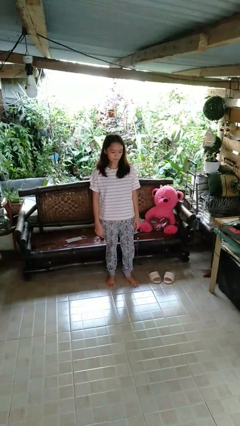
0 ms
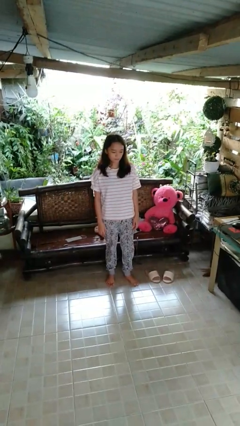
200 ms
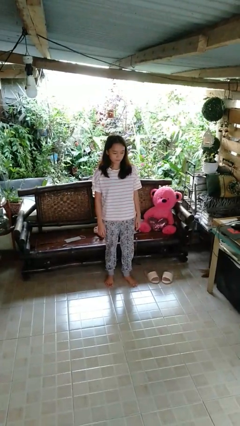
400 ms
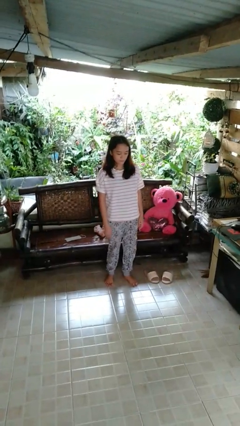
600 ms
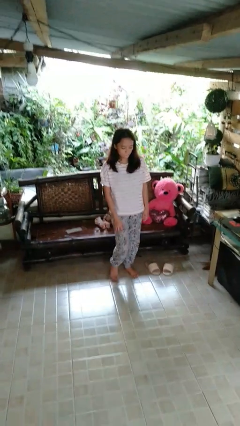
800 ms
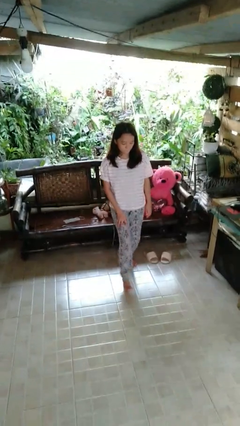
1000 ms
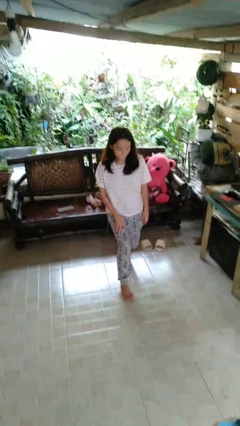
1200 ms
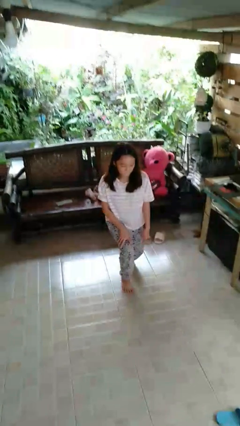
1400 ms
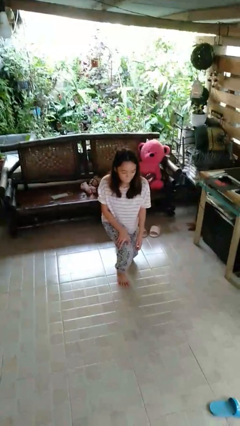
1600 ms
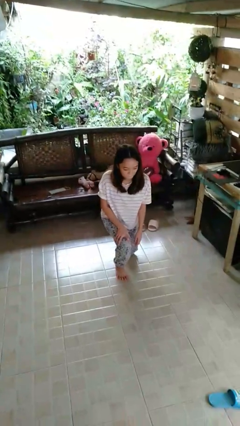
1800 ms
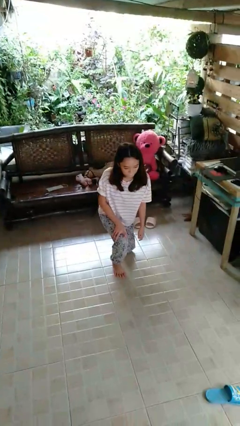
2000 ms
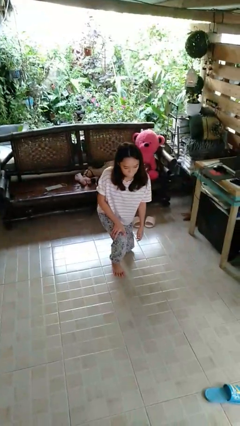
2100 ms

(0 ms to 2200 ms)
person kneels

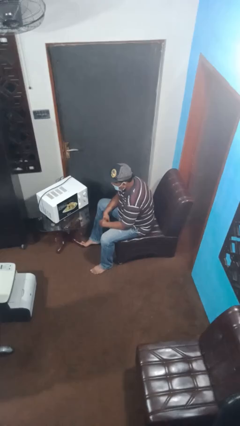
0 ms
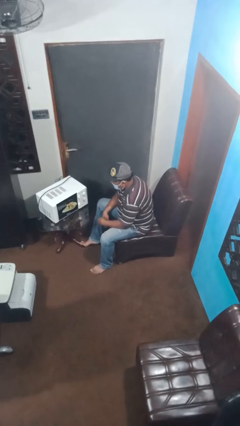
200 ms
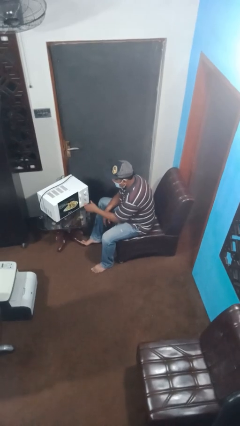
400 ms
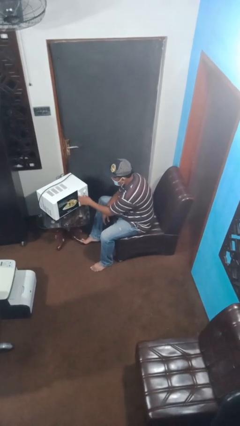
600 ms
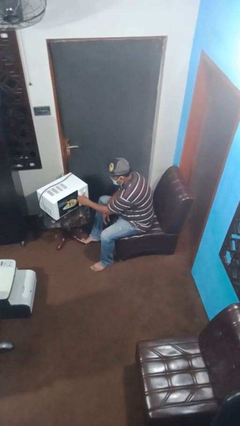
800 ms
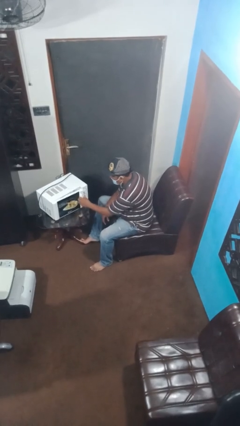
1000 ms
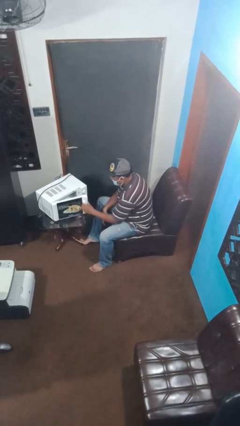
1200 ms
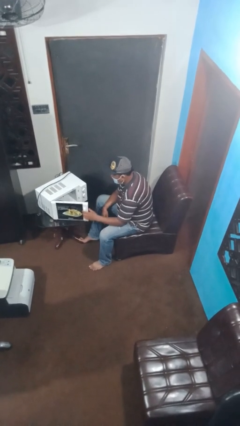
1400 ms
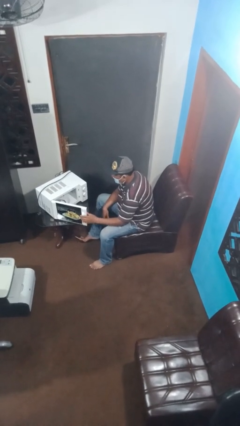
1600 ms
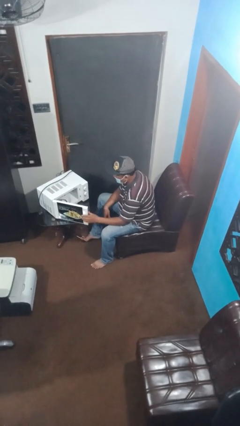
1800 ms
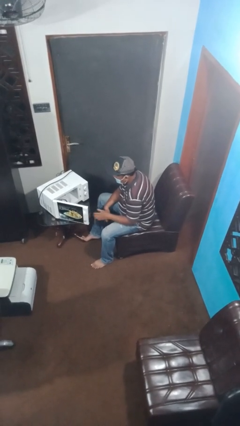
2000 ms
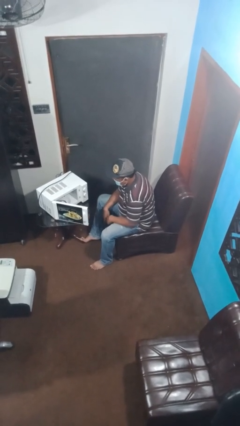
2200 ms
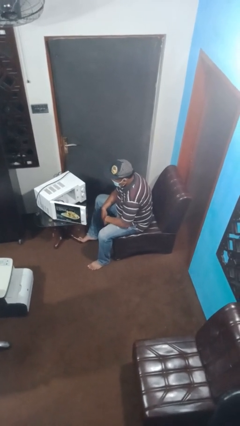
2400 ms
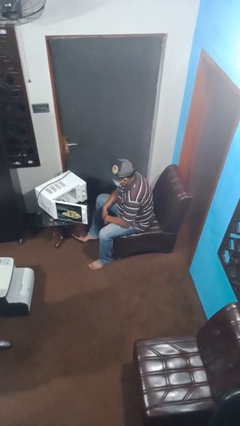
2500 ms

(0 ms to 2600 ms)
person opens microwave

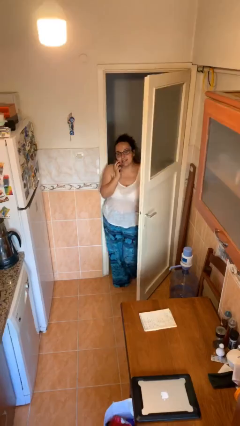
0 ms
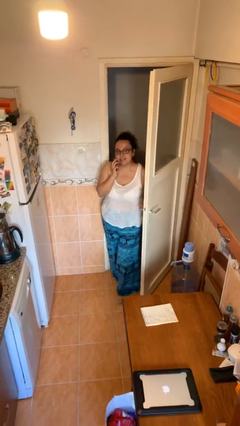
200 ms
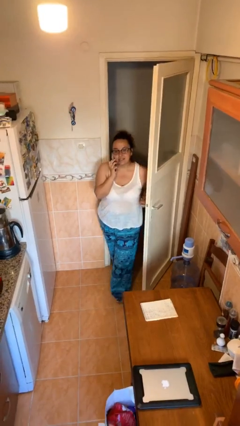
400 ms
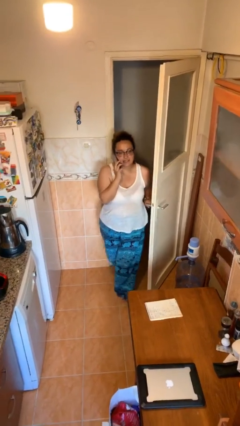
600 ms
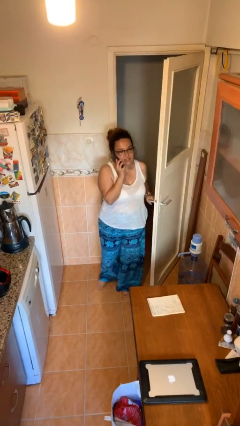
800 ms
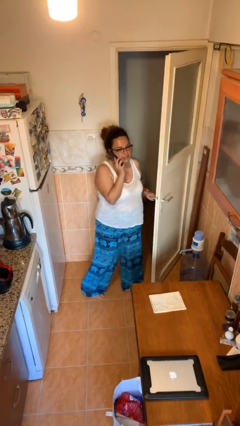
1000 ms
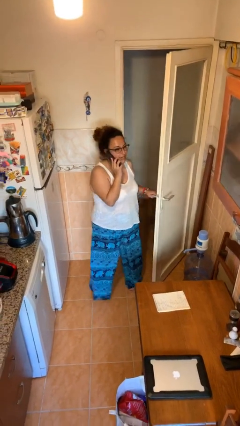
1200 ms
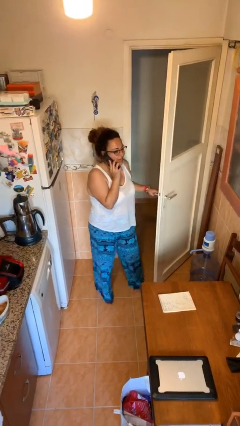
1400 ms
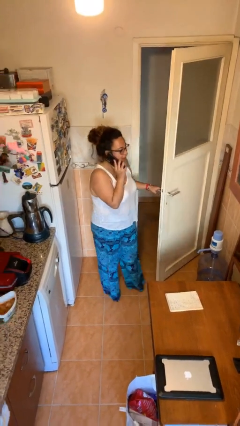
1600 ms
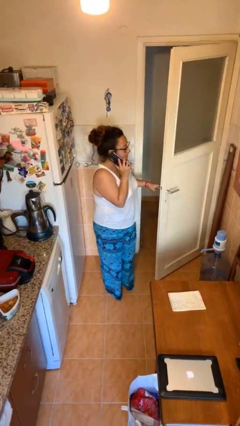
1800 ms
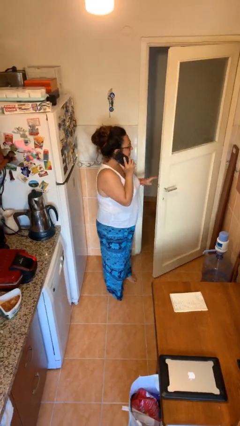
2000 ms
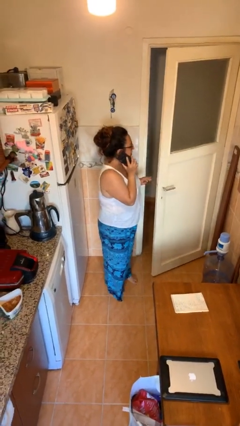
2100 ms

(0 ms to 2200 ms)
person enters scene through structure

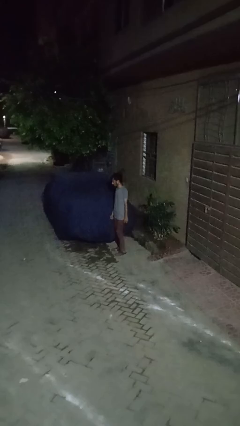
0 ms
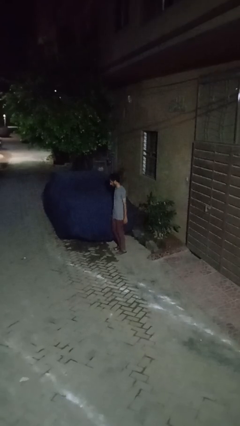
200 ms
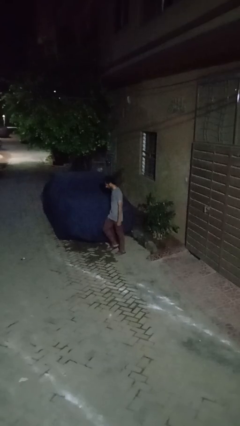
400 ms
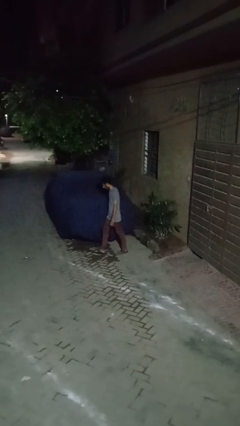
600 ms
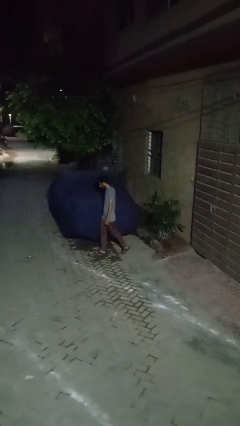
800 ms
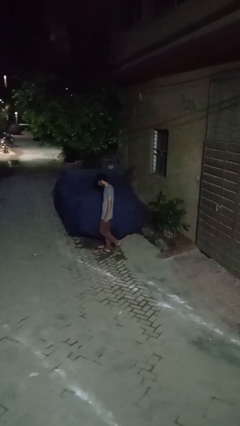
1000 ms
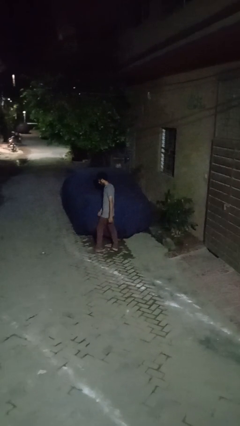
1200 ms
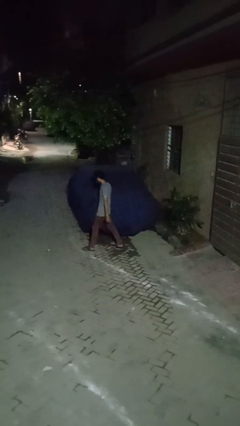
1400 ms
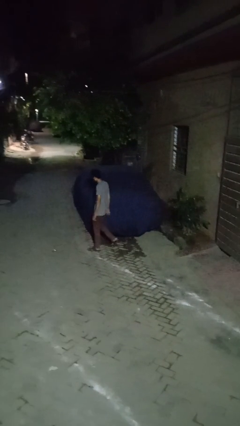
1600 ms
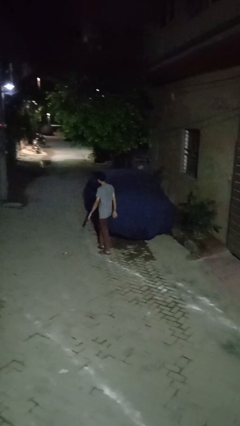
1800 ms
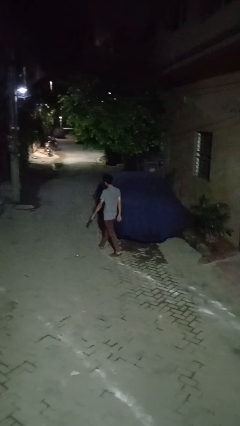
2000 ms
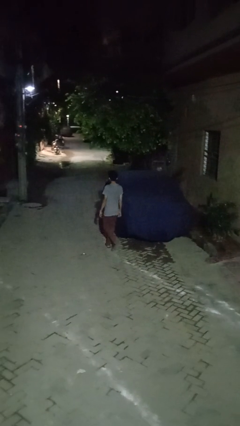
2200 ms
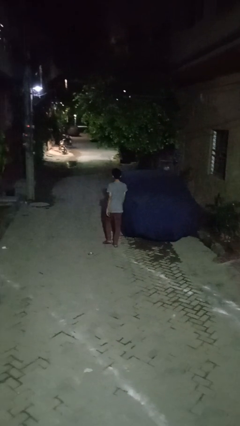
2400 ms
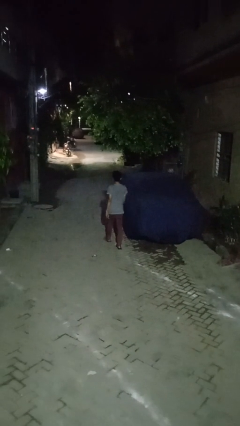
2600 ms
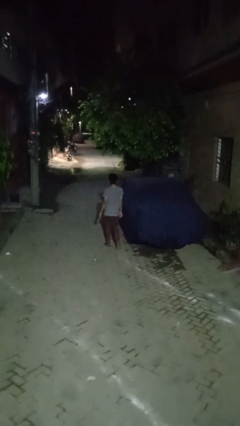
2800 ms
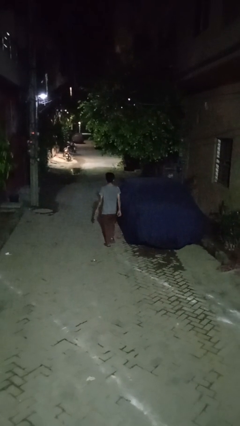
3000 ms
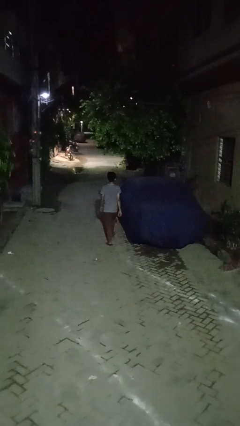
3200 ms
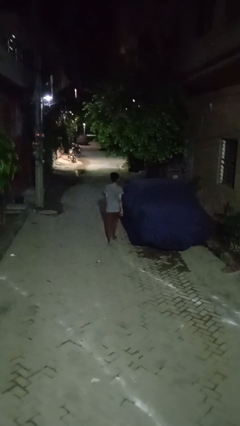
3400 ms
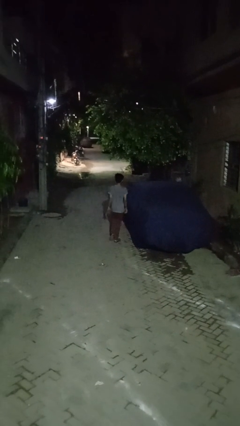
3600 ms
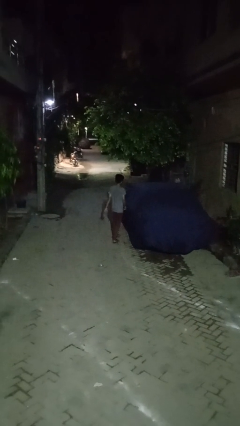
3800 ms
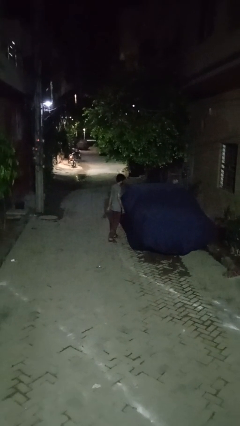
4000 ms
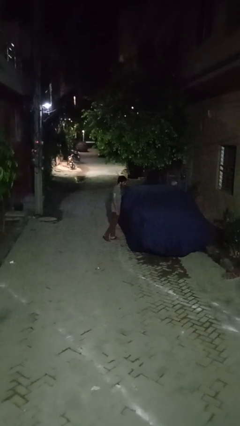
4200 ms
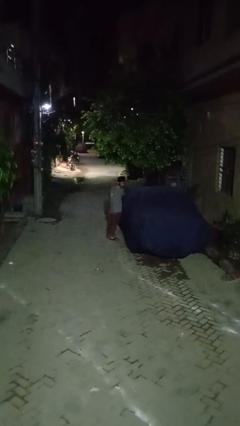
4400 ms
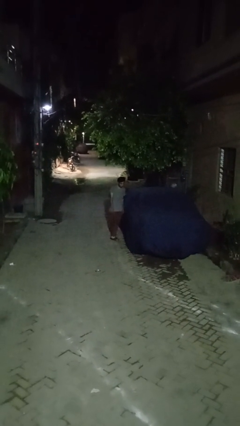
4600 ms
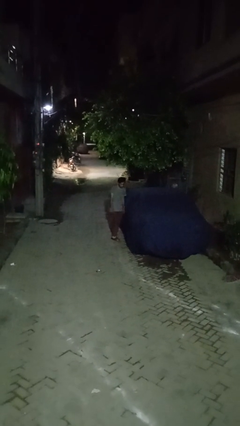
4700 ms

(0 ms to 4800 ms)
person walks around car

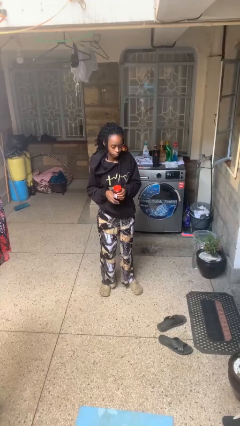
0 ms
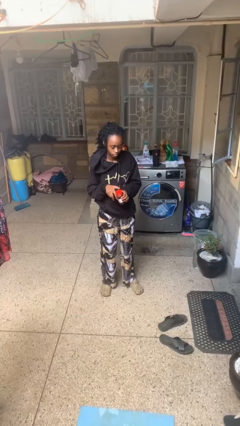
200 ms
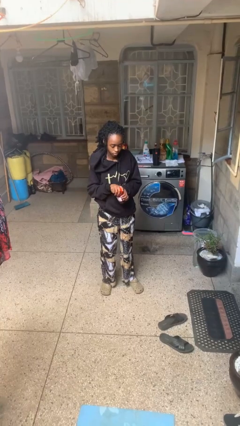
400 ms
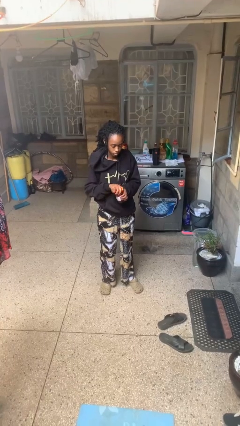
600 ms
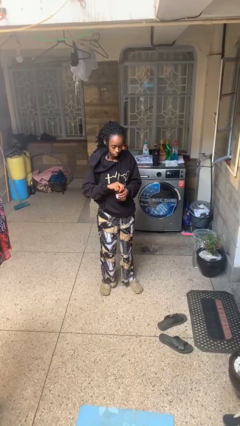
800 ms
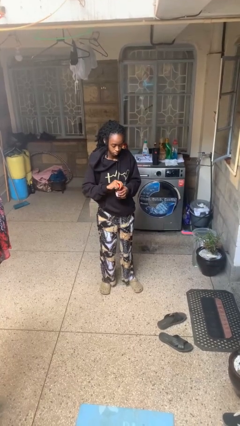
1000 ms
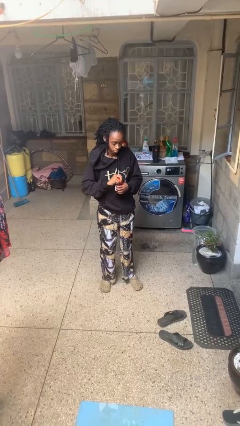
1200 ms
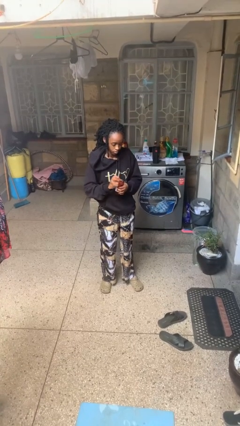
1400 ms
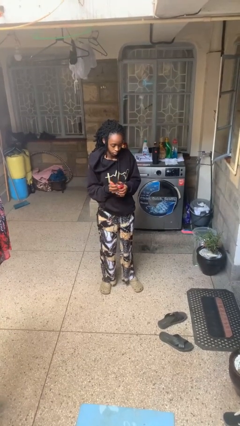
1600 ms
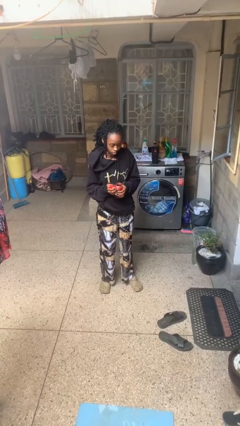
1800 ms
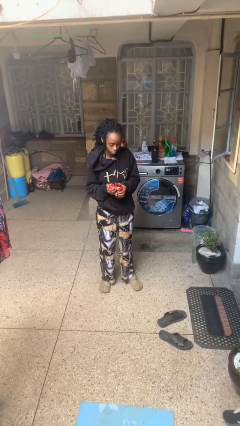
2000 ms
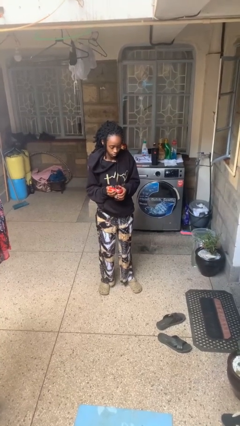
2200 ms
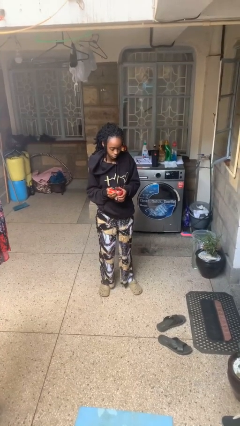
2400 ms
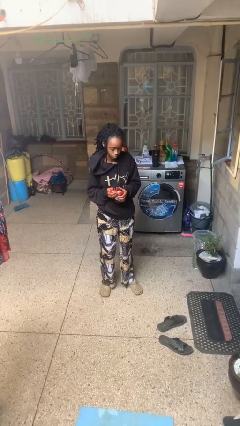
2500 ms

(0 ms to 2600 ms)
person opens jar

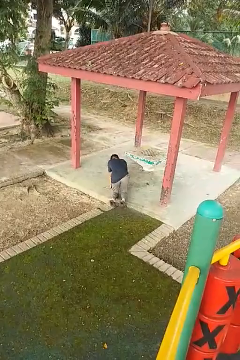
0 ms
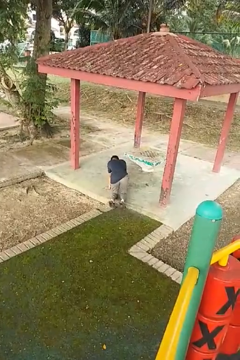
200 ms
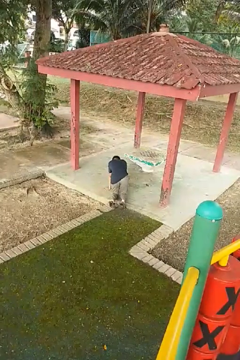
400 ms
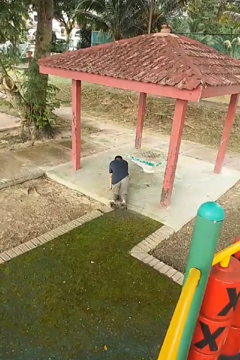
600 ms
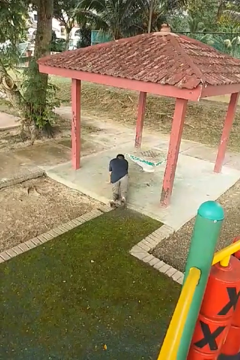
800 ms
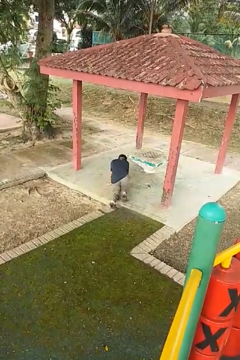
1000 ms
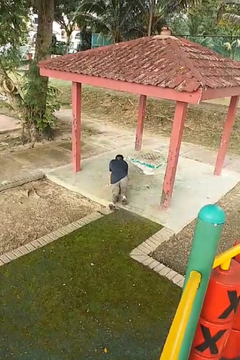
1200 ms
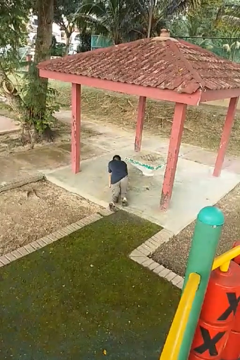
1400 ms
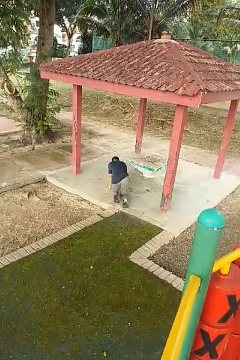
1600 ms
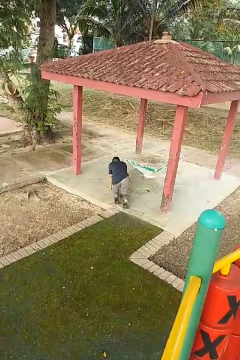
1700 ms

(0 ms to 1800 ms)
person crawls

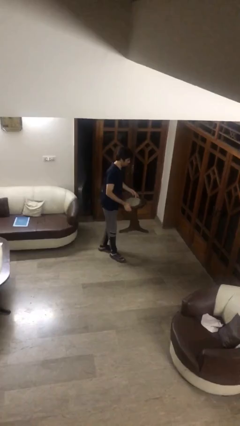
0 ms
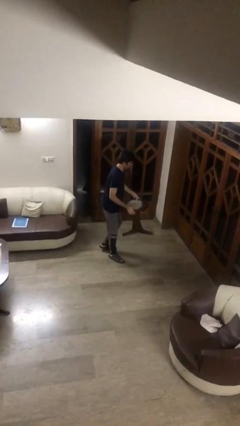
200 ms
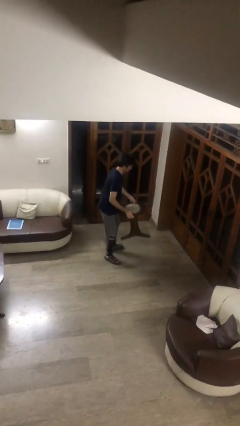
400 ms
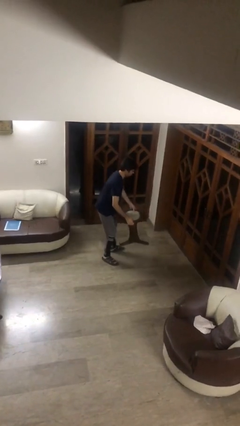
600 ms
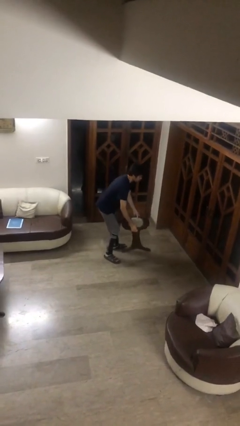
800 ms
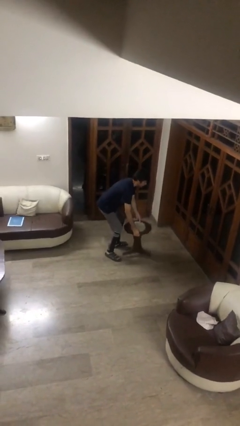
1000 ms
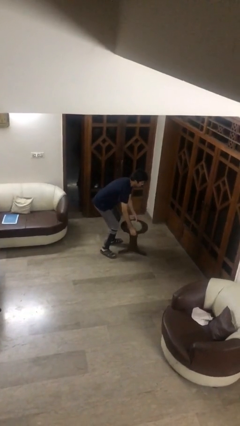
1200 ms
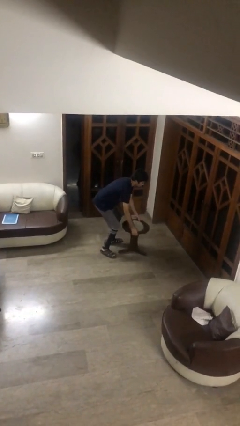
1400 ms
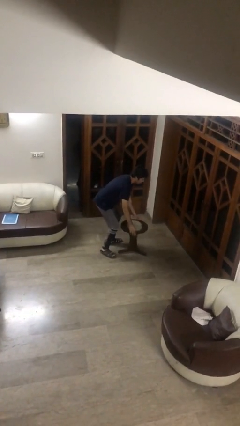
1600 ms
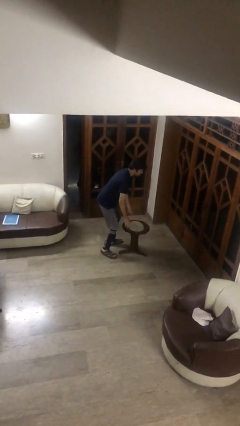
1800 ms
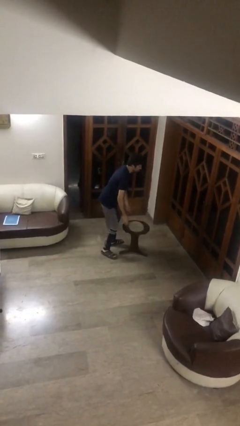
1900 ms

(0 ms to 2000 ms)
person puts down object on floor
